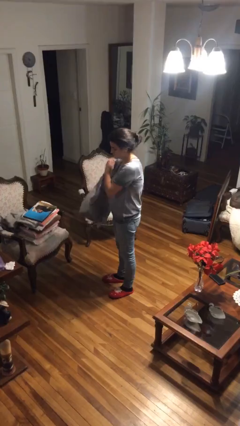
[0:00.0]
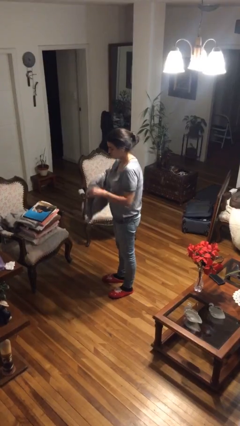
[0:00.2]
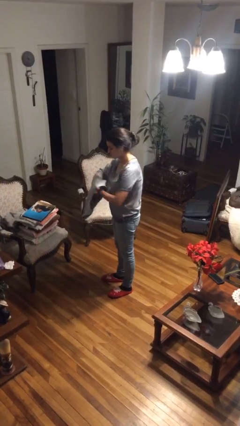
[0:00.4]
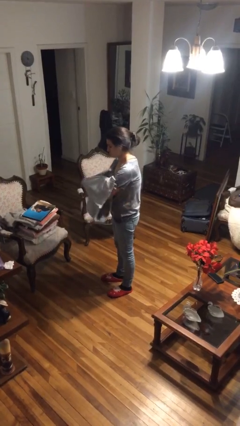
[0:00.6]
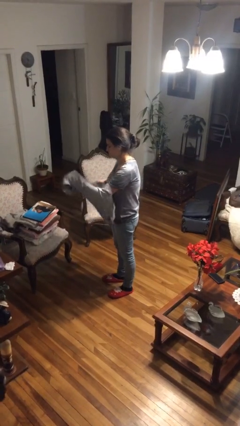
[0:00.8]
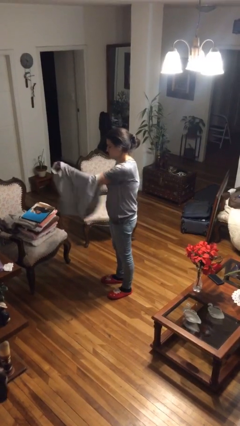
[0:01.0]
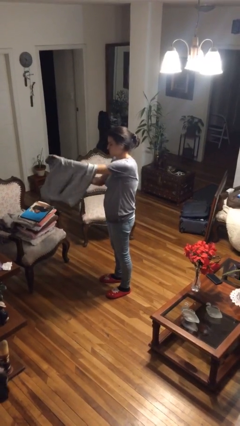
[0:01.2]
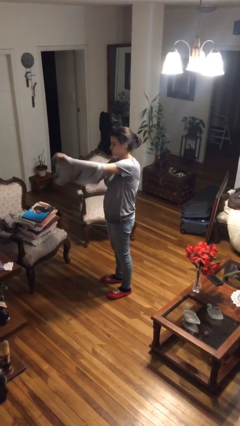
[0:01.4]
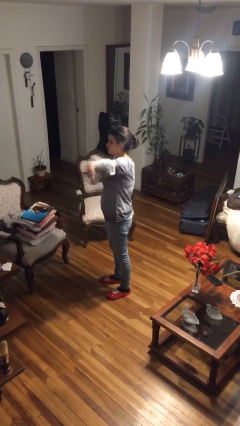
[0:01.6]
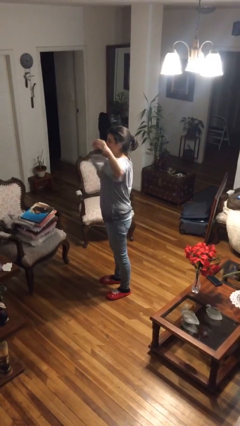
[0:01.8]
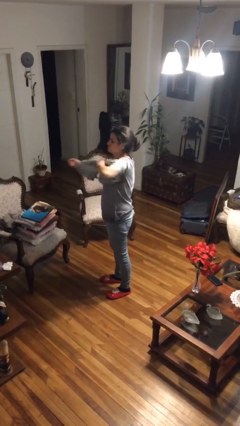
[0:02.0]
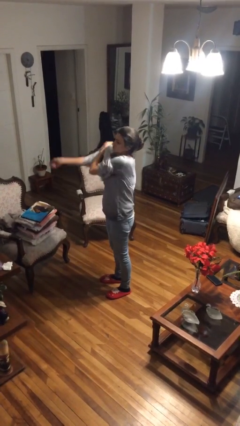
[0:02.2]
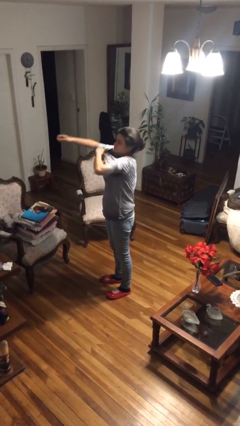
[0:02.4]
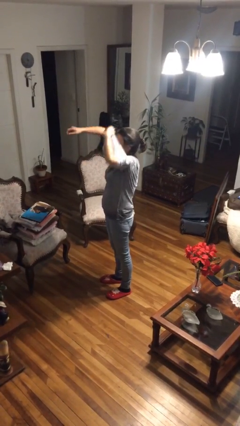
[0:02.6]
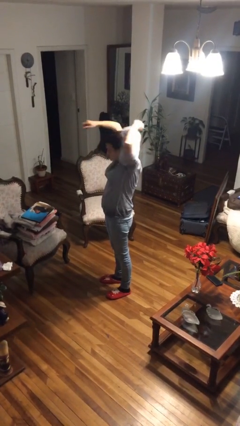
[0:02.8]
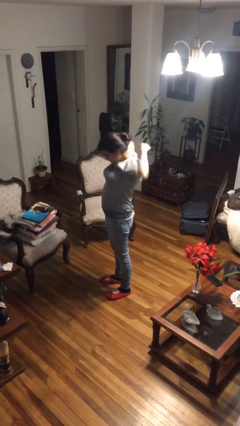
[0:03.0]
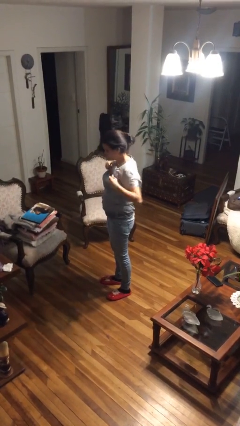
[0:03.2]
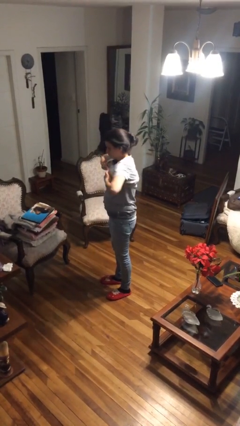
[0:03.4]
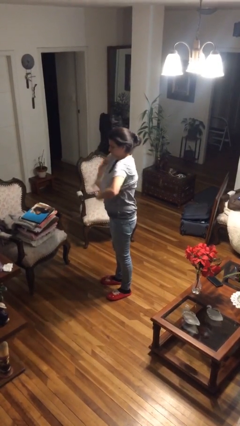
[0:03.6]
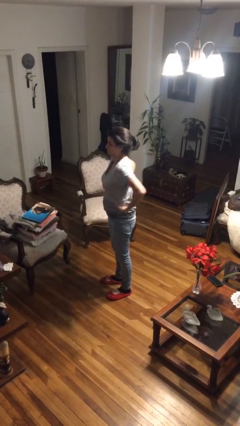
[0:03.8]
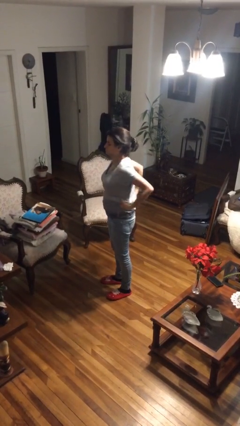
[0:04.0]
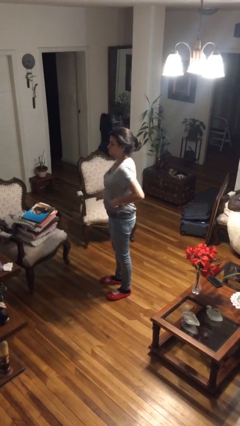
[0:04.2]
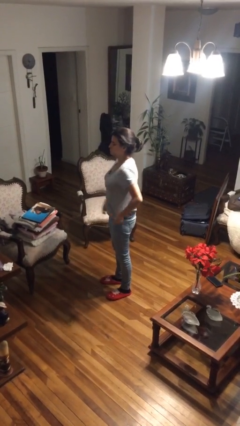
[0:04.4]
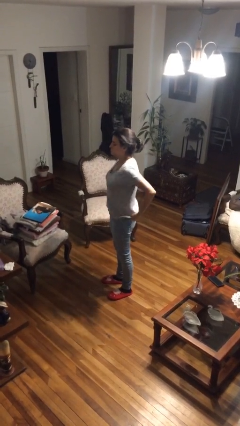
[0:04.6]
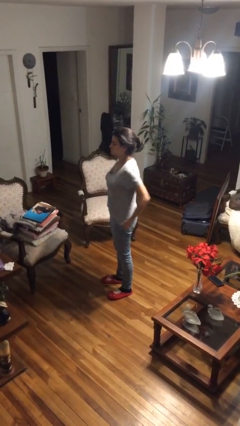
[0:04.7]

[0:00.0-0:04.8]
person puts on shirt

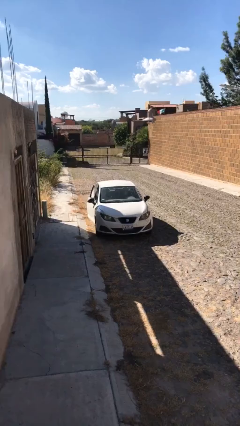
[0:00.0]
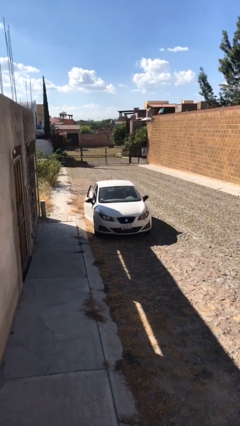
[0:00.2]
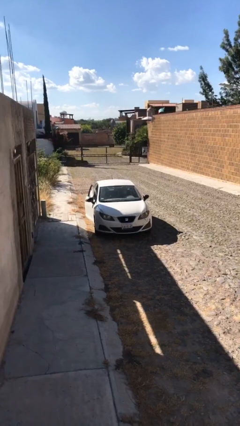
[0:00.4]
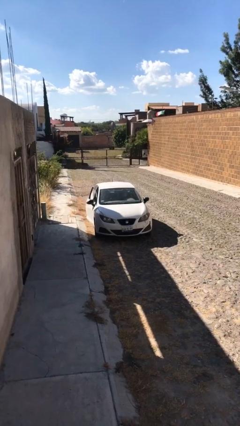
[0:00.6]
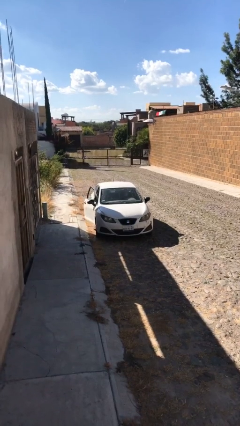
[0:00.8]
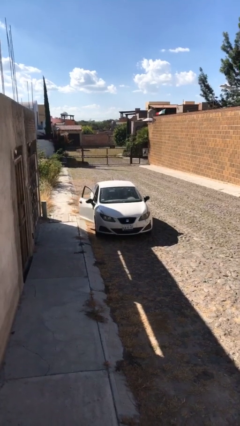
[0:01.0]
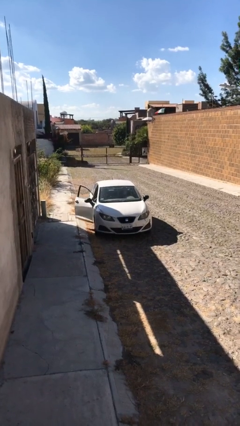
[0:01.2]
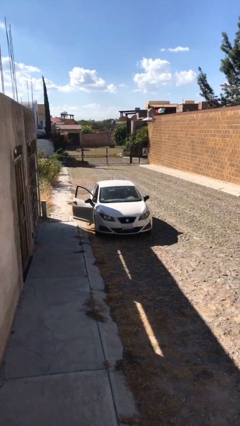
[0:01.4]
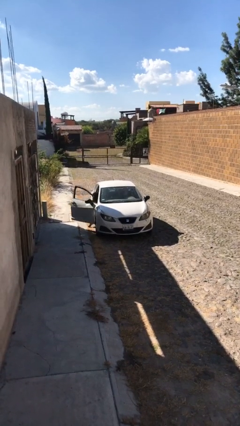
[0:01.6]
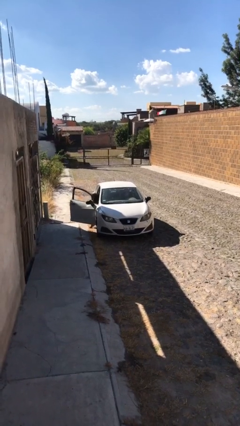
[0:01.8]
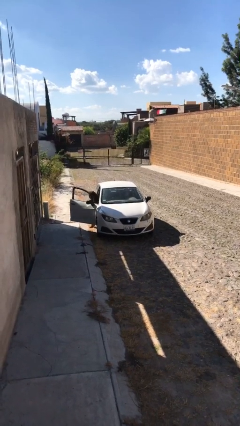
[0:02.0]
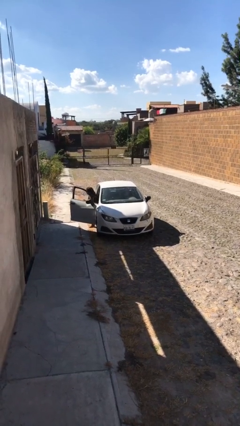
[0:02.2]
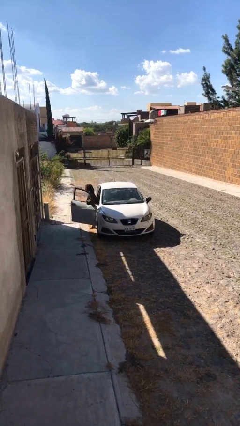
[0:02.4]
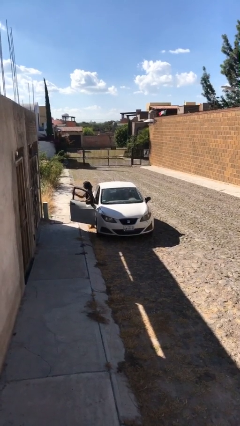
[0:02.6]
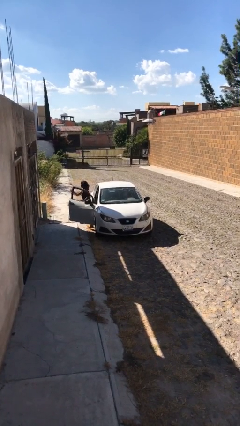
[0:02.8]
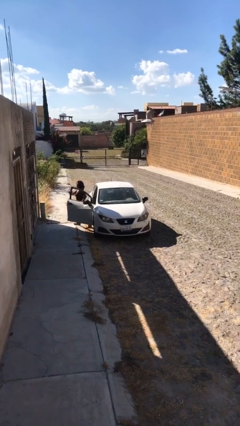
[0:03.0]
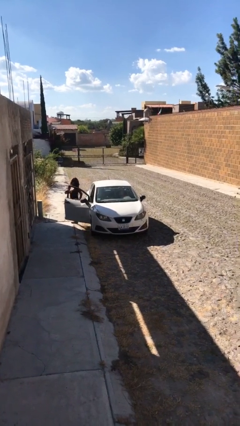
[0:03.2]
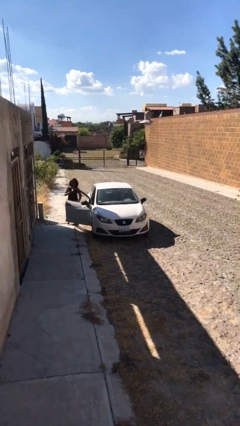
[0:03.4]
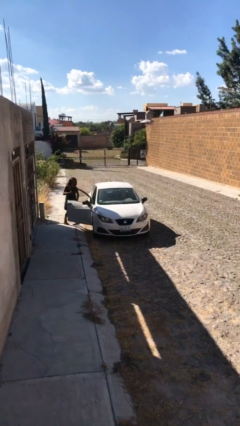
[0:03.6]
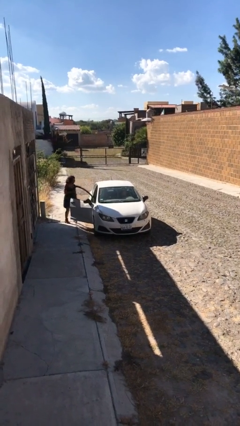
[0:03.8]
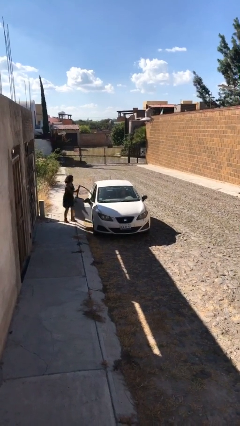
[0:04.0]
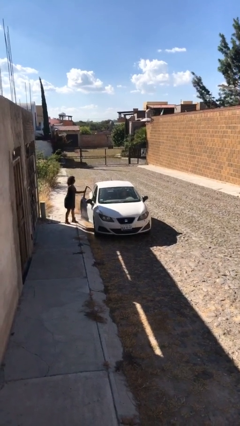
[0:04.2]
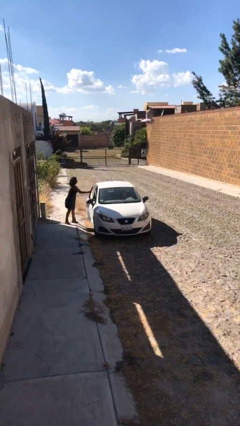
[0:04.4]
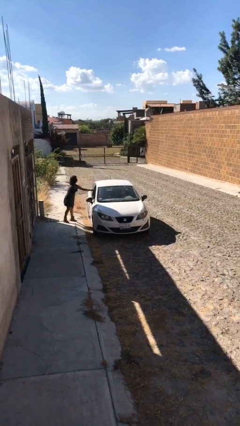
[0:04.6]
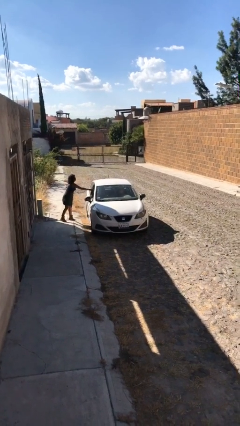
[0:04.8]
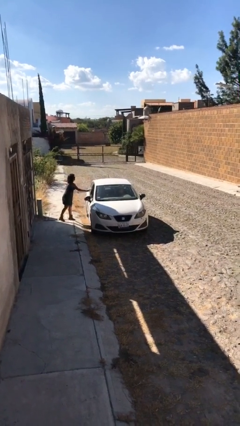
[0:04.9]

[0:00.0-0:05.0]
car drops off person

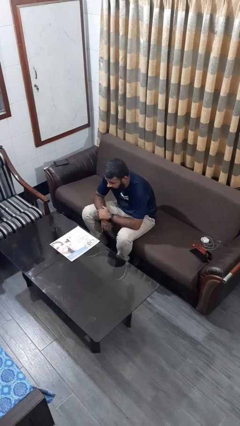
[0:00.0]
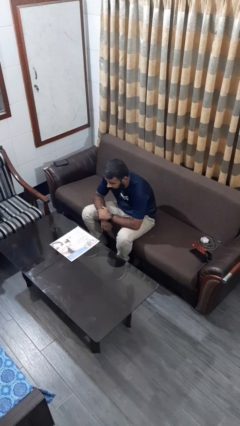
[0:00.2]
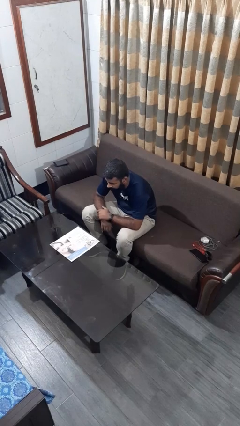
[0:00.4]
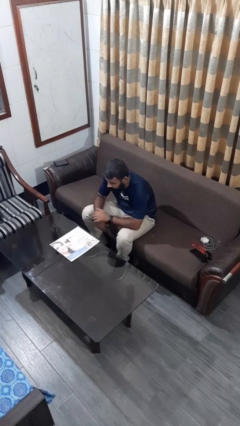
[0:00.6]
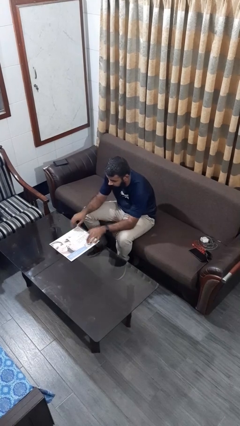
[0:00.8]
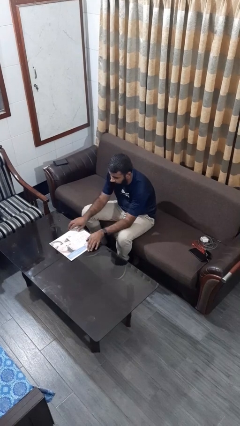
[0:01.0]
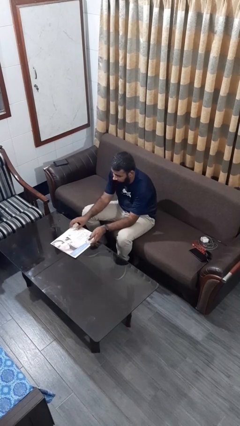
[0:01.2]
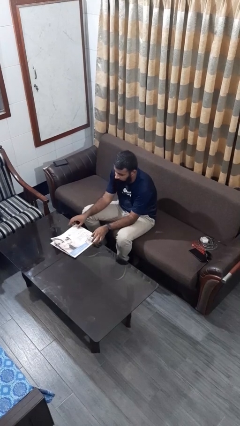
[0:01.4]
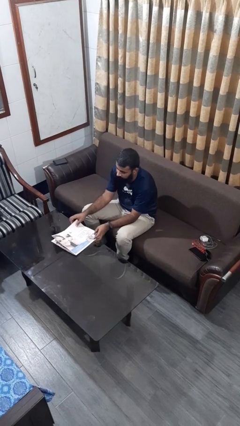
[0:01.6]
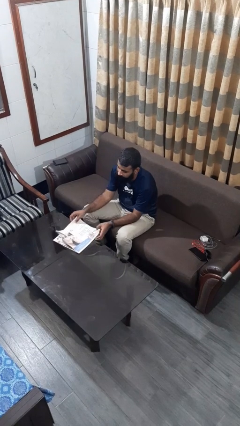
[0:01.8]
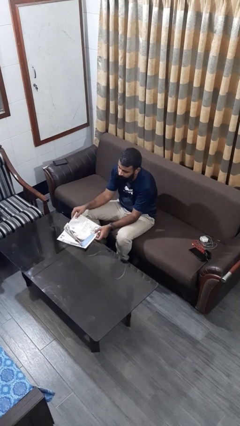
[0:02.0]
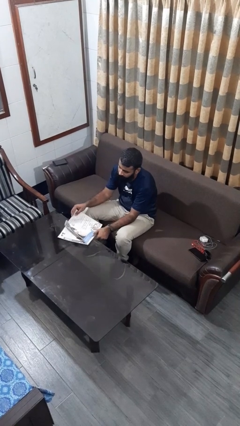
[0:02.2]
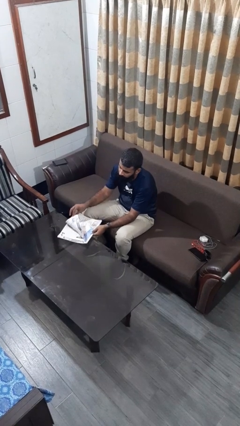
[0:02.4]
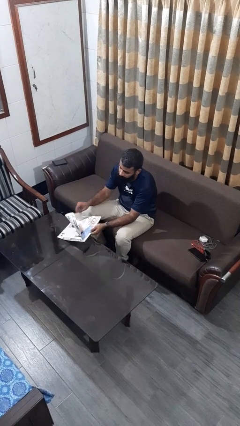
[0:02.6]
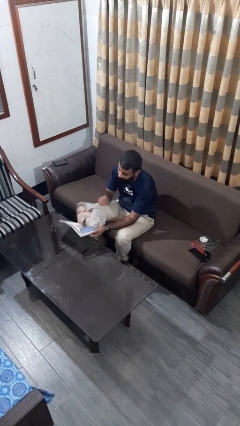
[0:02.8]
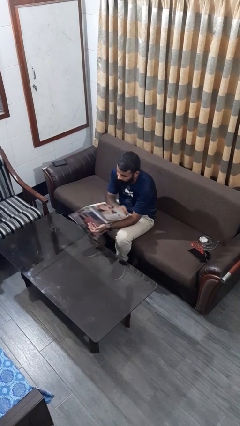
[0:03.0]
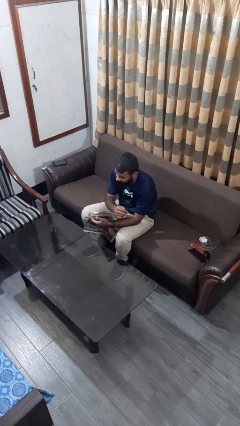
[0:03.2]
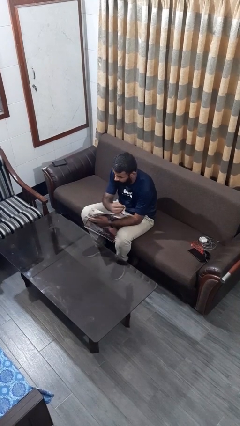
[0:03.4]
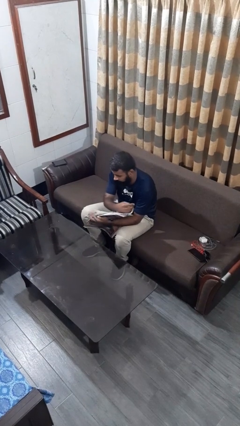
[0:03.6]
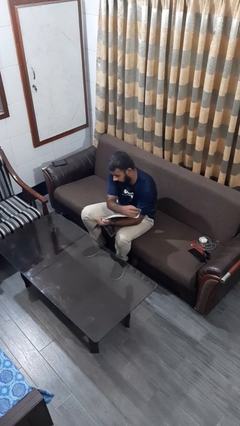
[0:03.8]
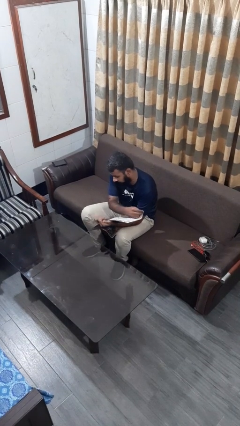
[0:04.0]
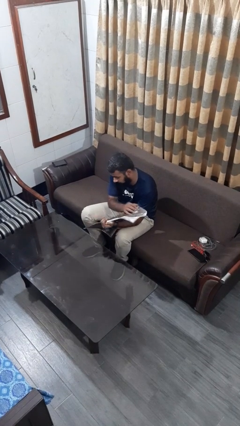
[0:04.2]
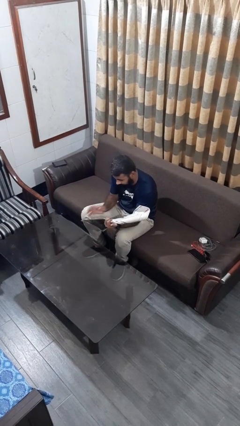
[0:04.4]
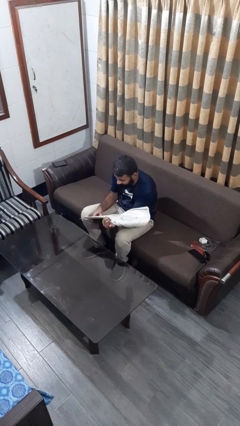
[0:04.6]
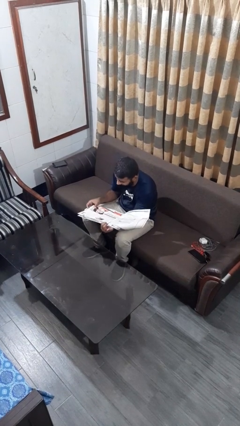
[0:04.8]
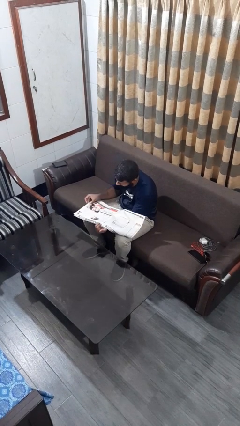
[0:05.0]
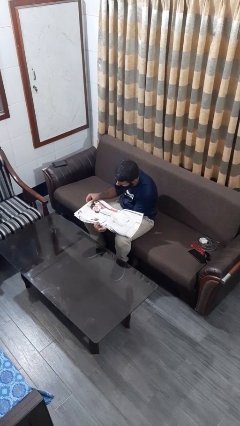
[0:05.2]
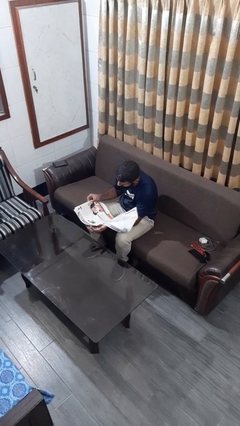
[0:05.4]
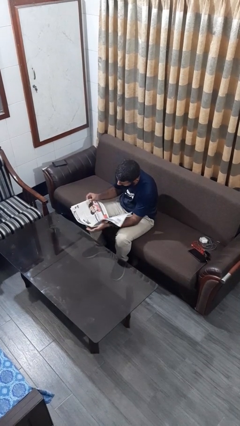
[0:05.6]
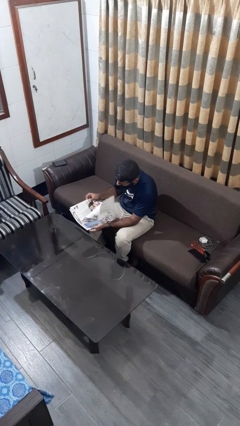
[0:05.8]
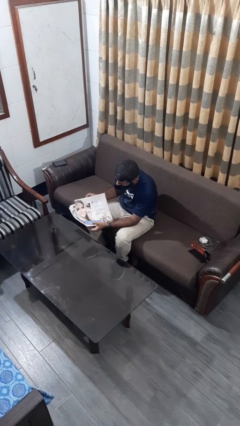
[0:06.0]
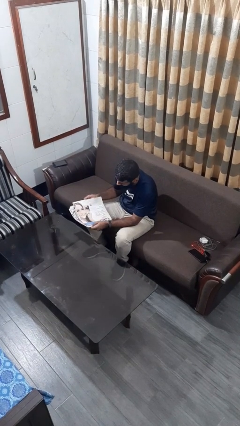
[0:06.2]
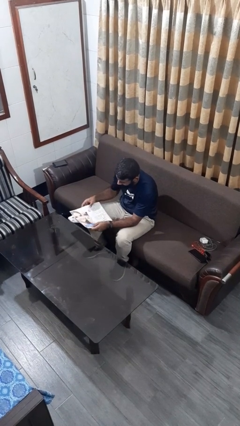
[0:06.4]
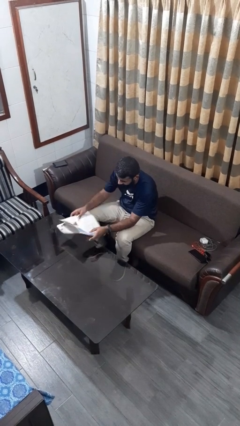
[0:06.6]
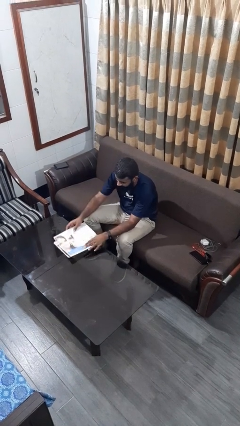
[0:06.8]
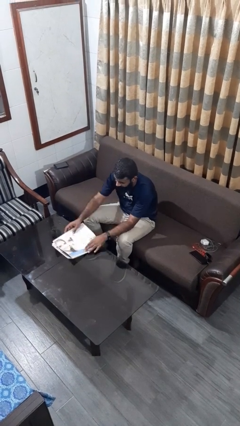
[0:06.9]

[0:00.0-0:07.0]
person reads magazine

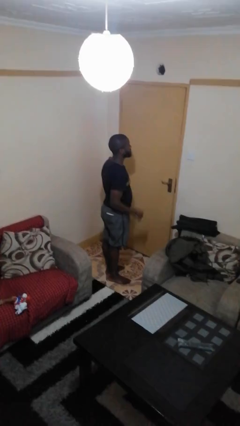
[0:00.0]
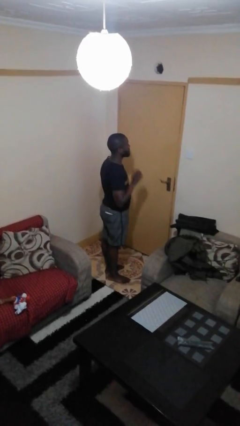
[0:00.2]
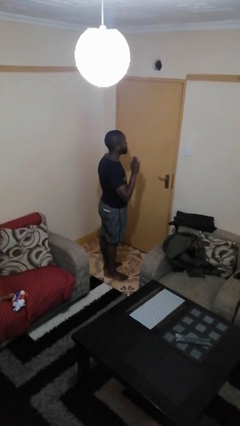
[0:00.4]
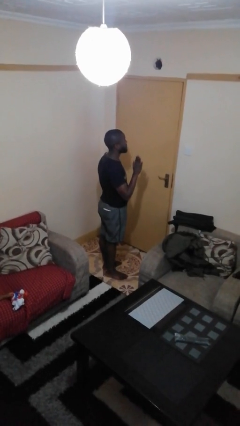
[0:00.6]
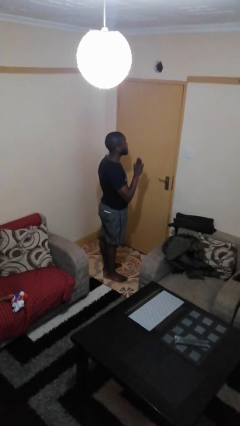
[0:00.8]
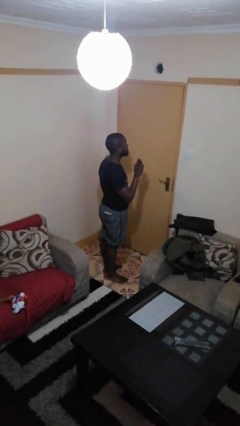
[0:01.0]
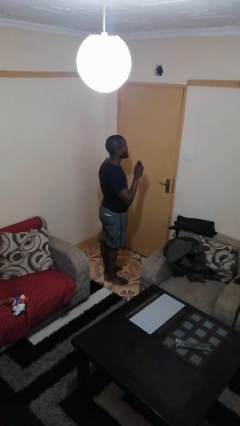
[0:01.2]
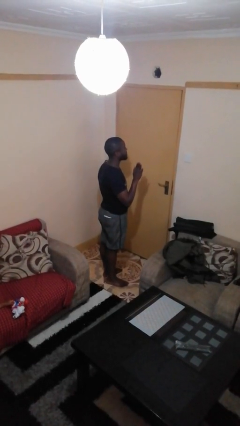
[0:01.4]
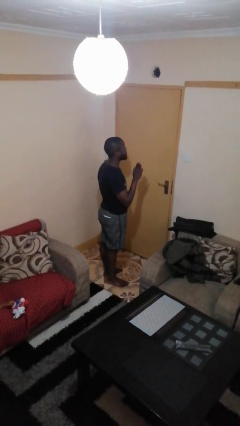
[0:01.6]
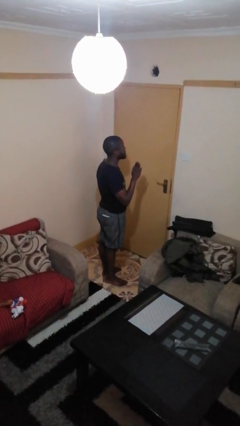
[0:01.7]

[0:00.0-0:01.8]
person gestures stop
